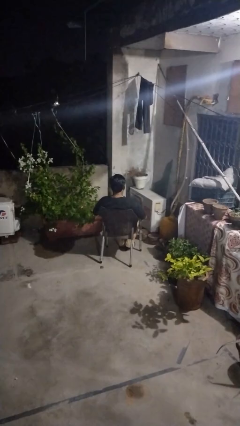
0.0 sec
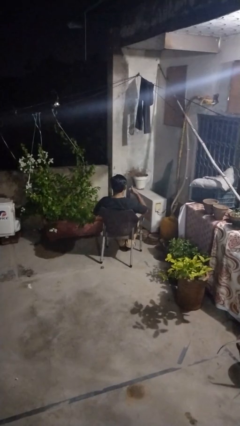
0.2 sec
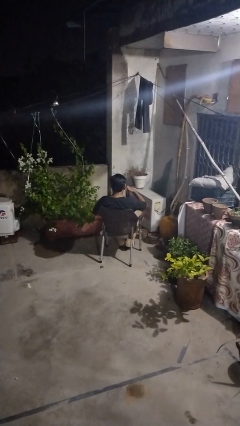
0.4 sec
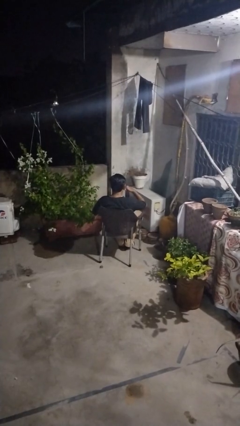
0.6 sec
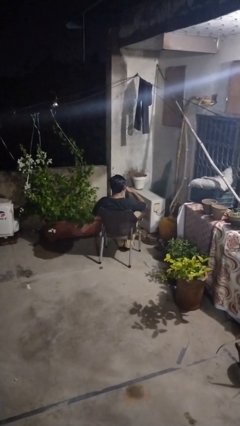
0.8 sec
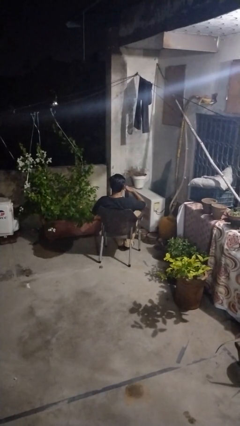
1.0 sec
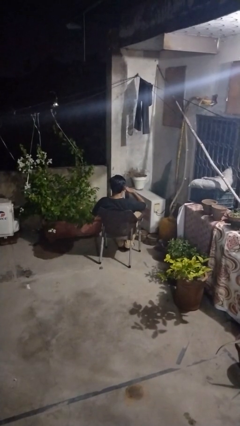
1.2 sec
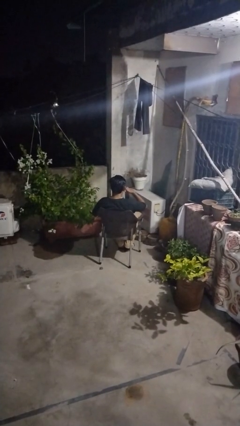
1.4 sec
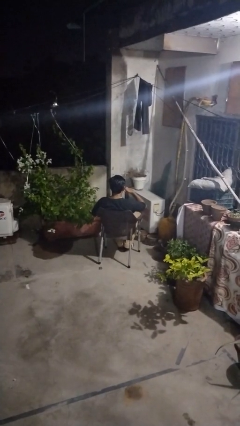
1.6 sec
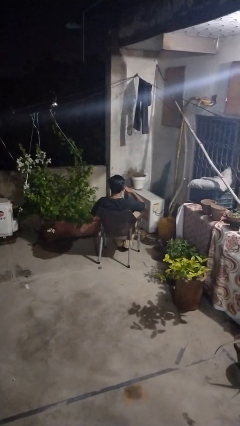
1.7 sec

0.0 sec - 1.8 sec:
person gestures call me

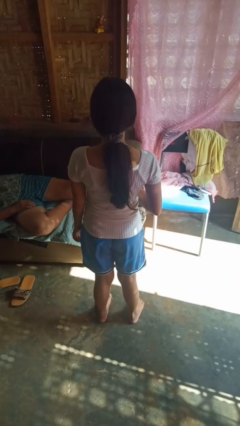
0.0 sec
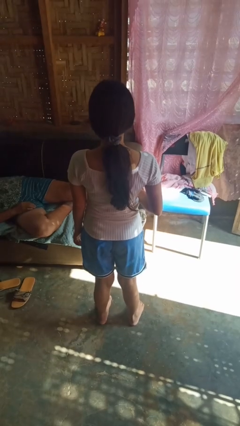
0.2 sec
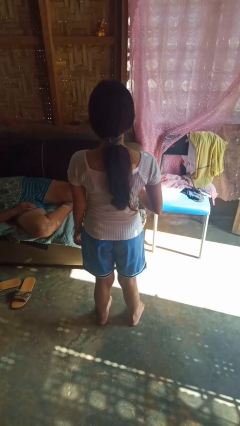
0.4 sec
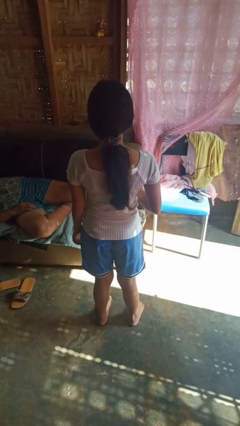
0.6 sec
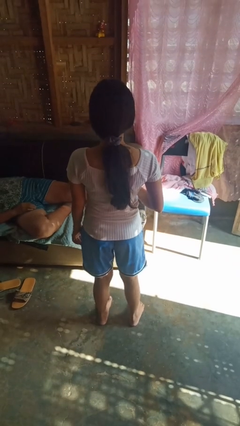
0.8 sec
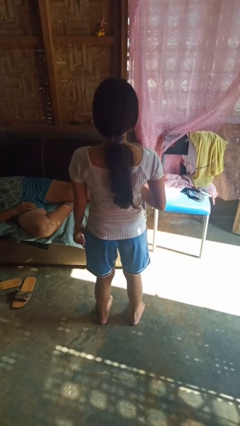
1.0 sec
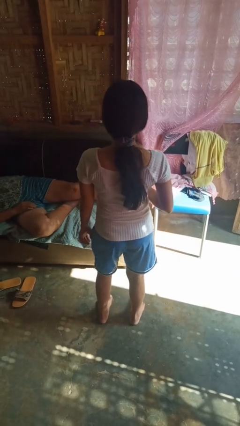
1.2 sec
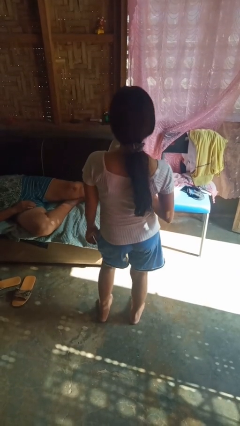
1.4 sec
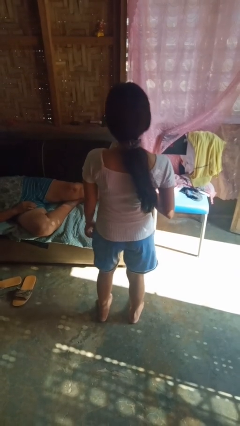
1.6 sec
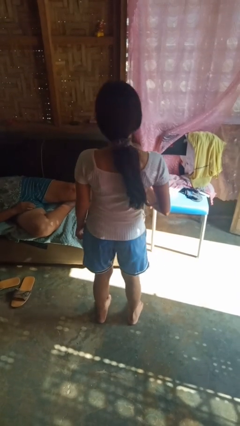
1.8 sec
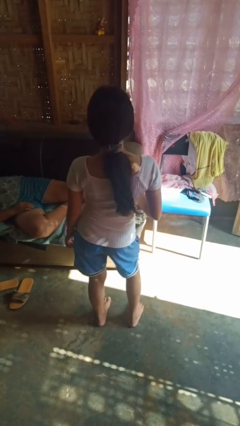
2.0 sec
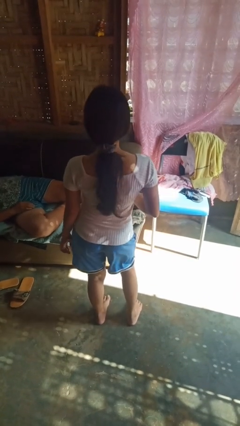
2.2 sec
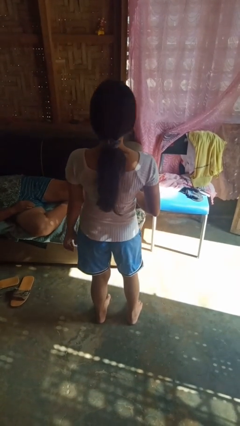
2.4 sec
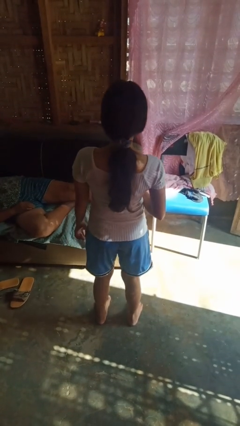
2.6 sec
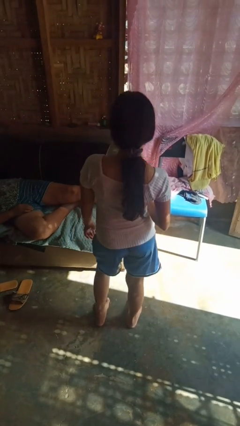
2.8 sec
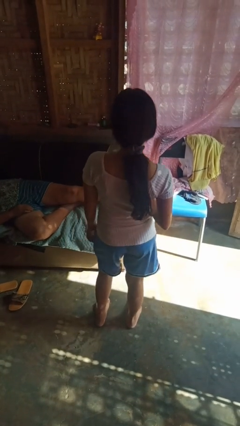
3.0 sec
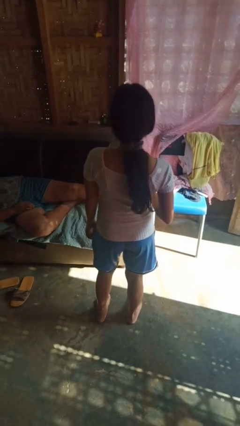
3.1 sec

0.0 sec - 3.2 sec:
person wiggles hips

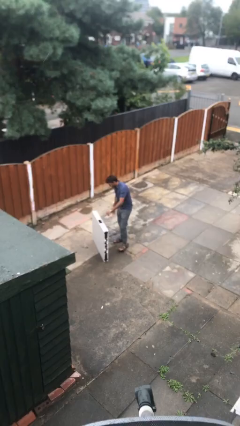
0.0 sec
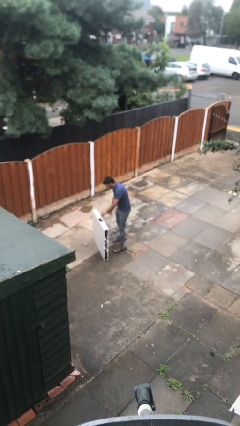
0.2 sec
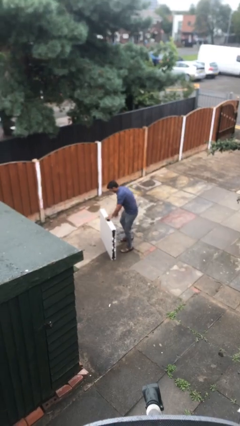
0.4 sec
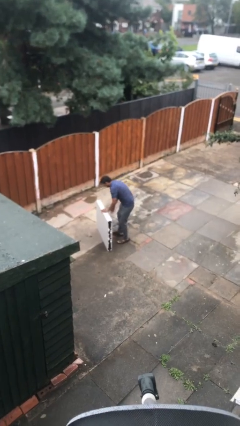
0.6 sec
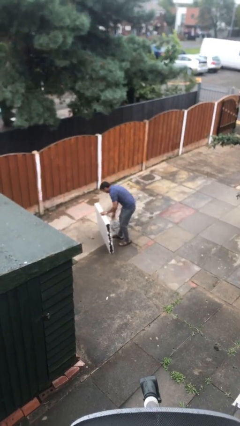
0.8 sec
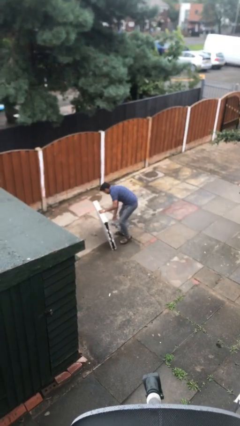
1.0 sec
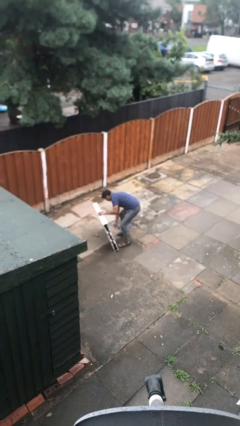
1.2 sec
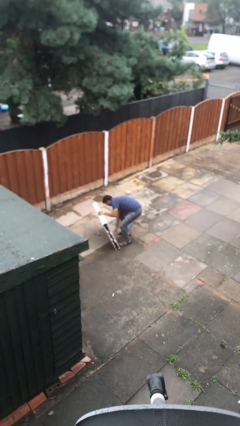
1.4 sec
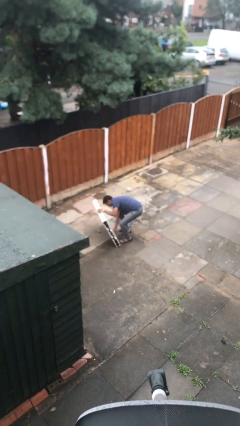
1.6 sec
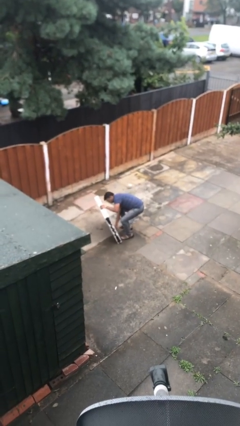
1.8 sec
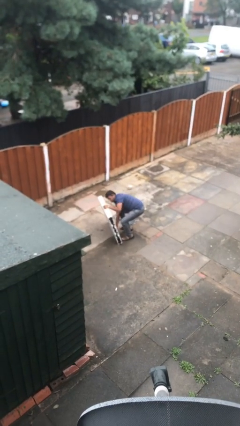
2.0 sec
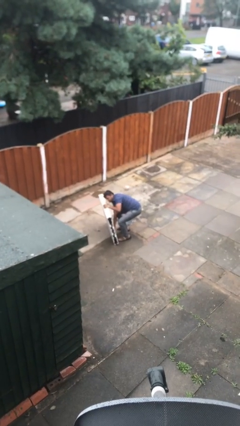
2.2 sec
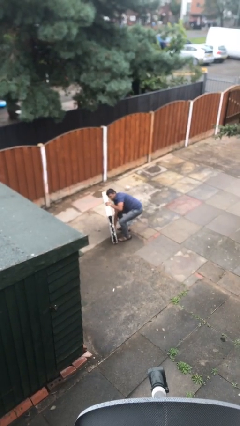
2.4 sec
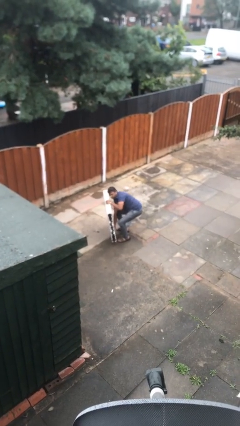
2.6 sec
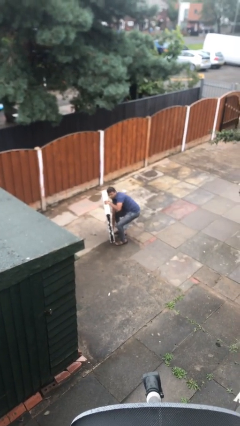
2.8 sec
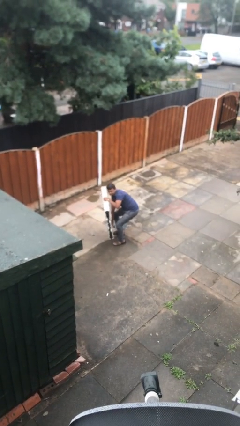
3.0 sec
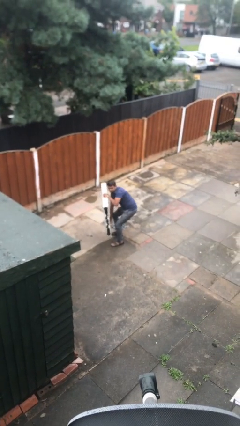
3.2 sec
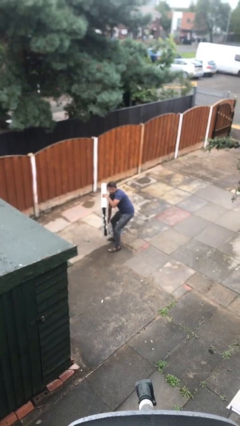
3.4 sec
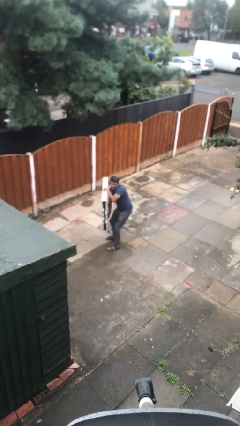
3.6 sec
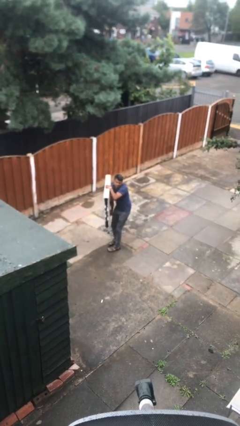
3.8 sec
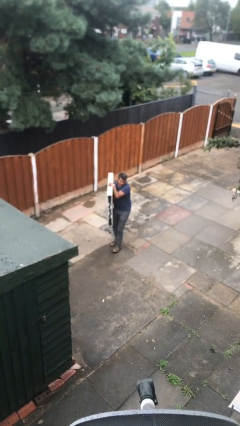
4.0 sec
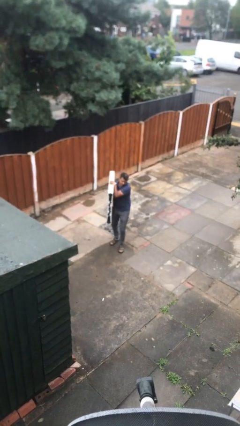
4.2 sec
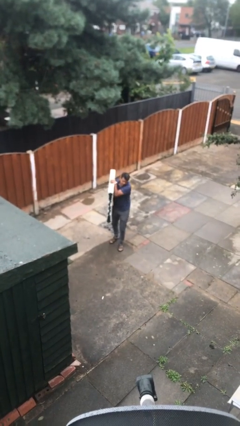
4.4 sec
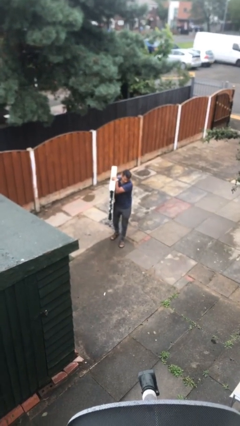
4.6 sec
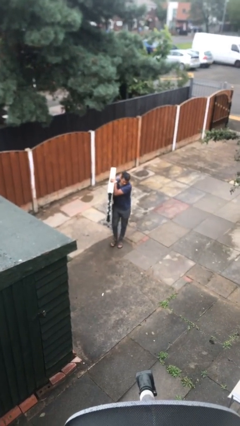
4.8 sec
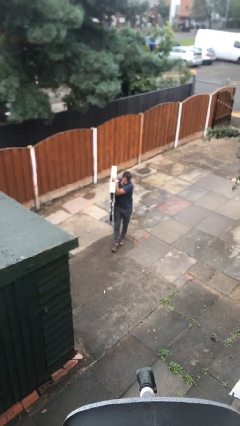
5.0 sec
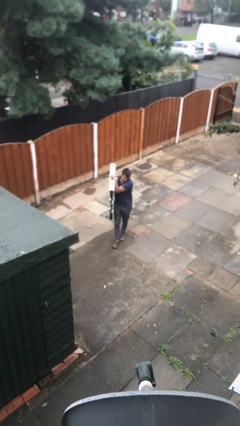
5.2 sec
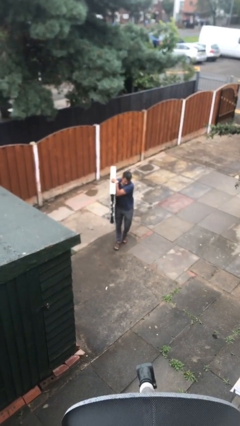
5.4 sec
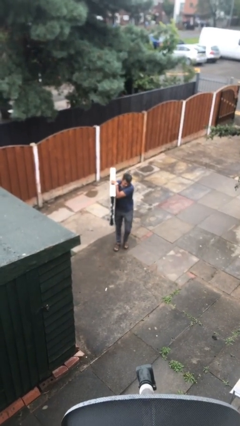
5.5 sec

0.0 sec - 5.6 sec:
person picks up object from floor

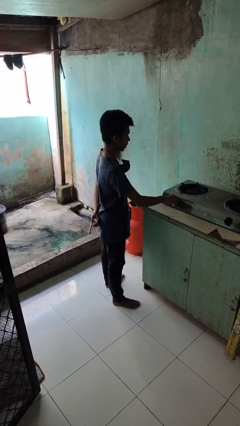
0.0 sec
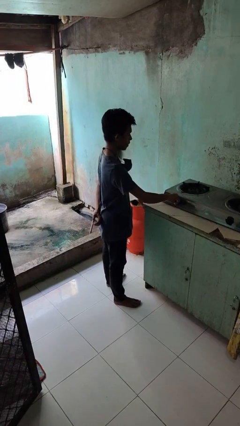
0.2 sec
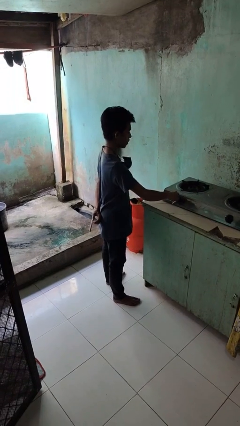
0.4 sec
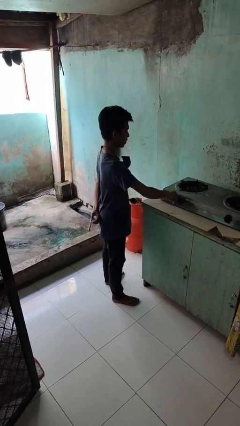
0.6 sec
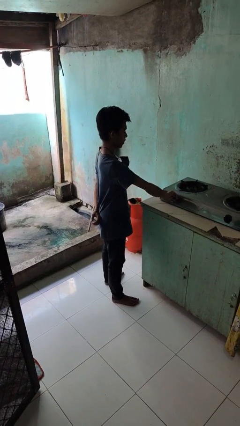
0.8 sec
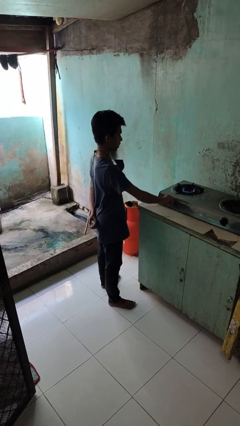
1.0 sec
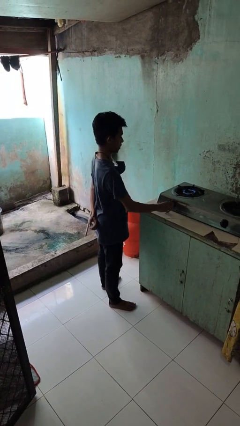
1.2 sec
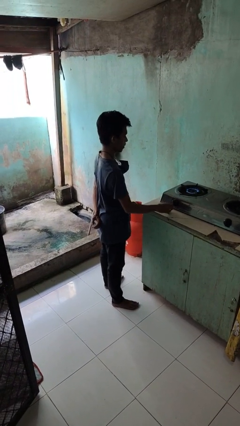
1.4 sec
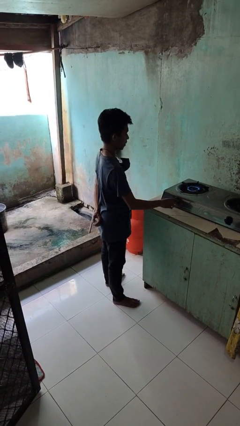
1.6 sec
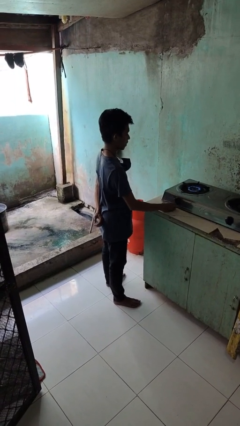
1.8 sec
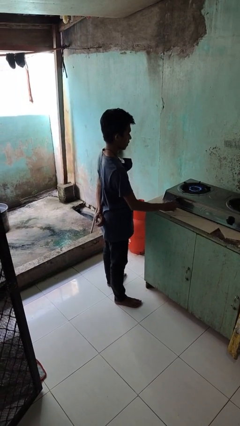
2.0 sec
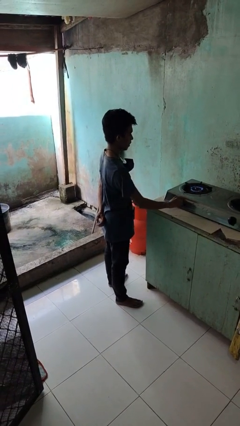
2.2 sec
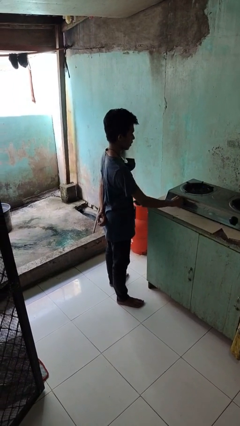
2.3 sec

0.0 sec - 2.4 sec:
person turns on stovetop

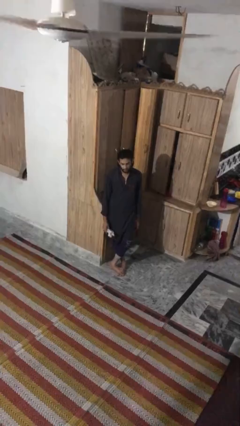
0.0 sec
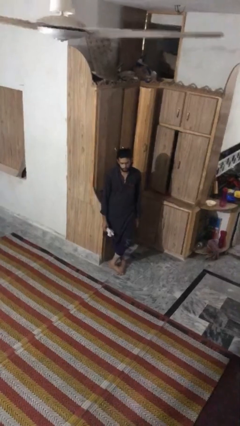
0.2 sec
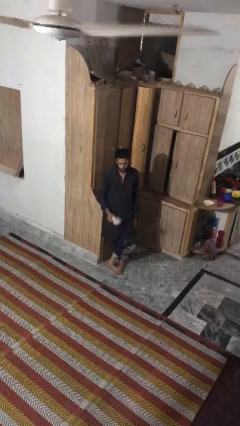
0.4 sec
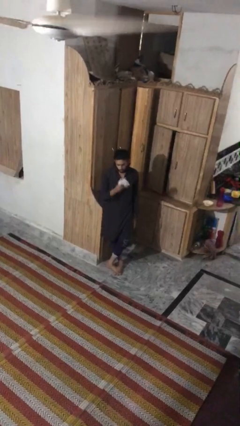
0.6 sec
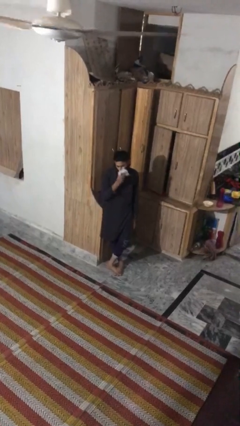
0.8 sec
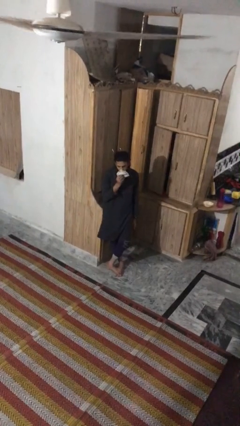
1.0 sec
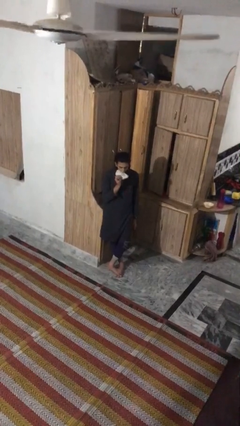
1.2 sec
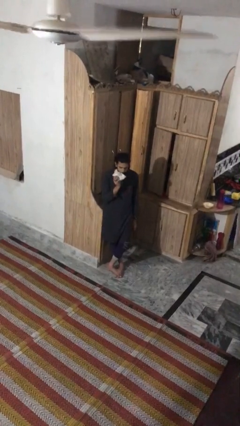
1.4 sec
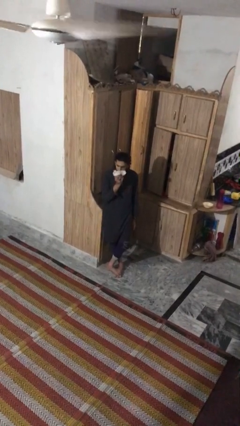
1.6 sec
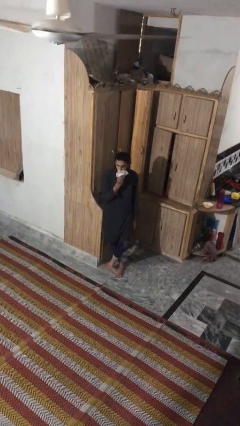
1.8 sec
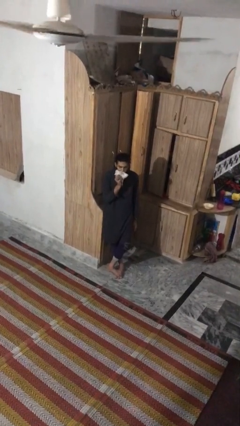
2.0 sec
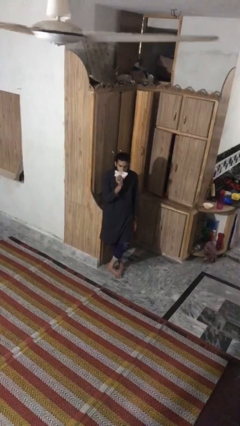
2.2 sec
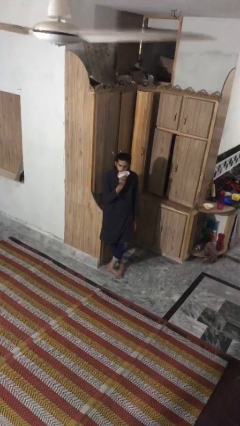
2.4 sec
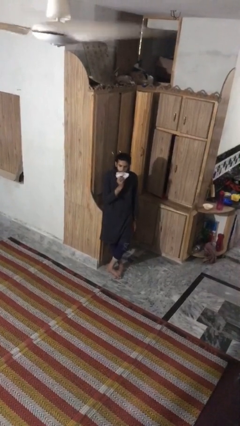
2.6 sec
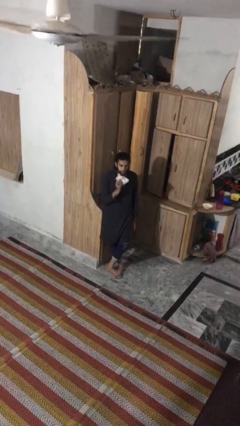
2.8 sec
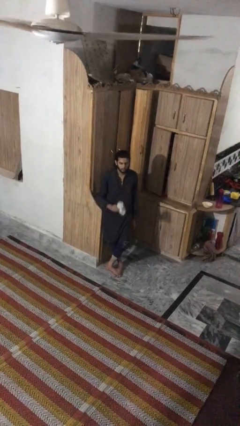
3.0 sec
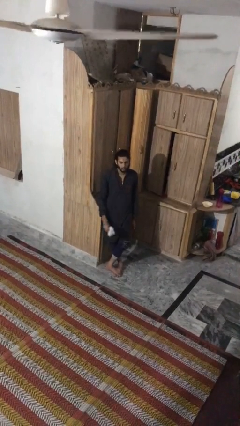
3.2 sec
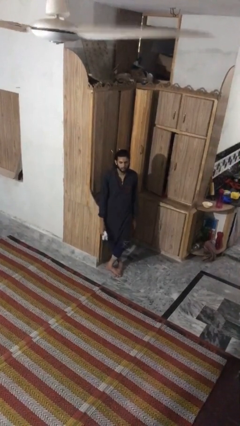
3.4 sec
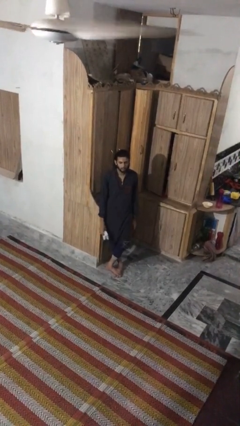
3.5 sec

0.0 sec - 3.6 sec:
person wipes mouth with napkin

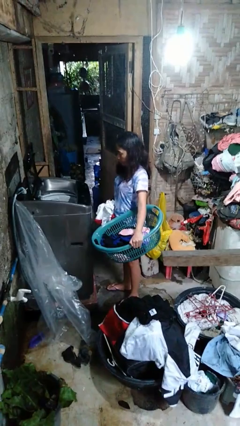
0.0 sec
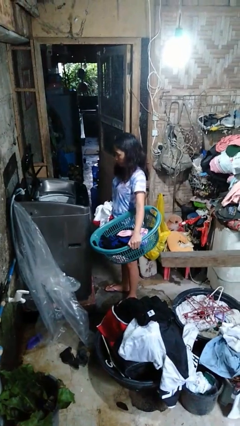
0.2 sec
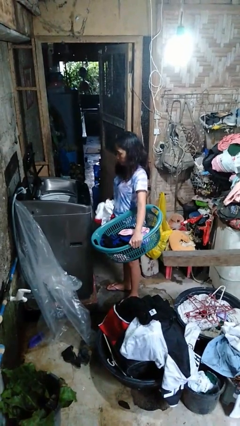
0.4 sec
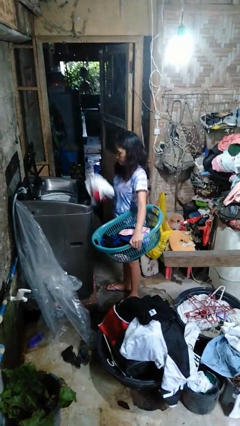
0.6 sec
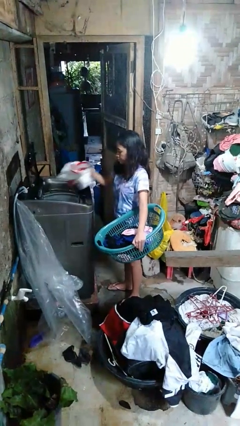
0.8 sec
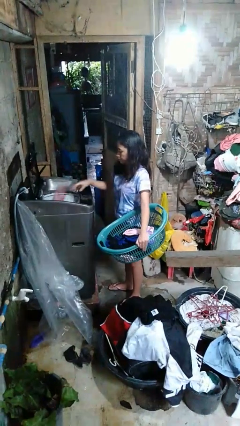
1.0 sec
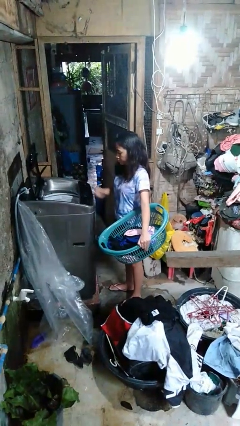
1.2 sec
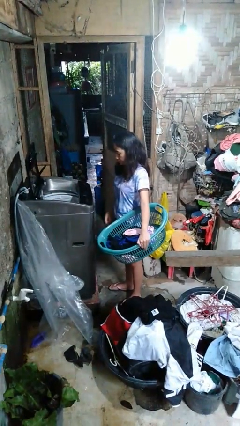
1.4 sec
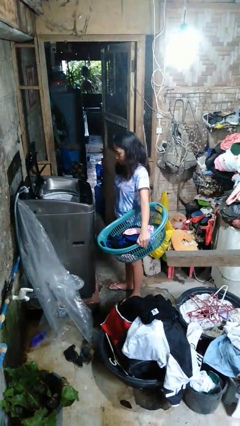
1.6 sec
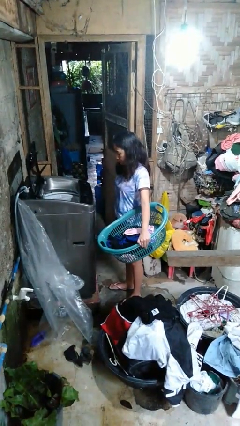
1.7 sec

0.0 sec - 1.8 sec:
person loads clotheswasher
